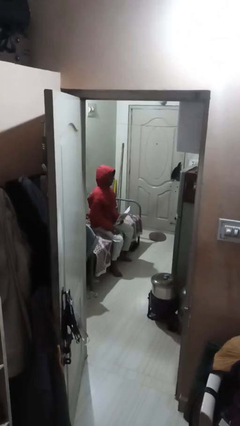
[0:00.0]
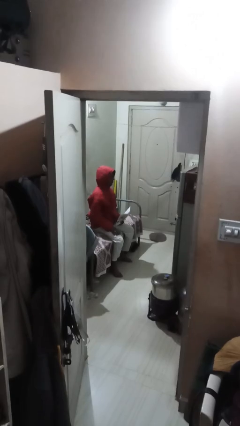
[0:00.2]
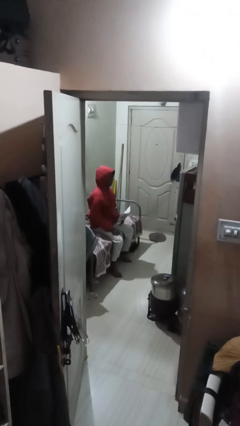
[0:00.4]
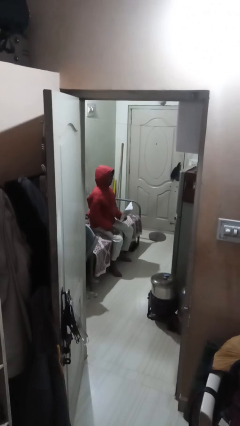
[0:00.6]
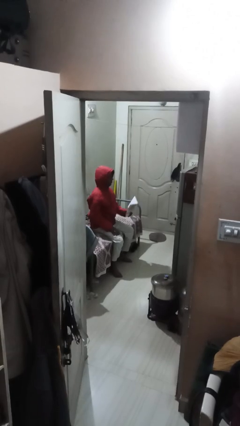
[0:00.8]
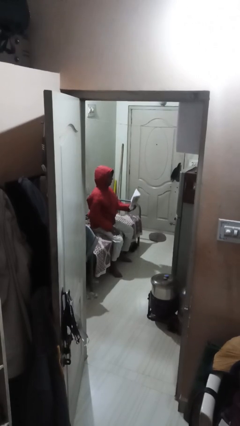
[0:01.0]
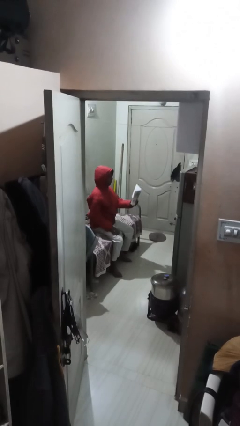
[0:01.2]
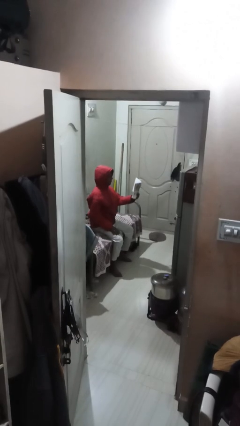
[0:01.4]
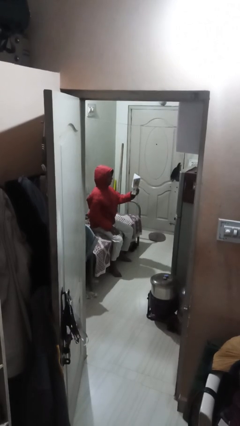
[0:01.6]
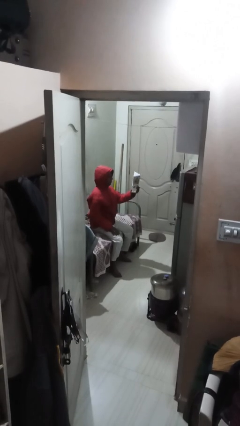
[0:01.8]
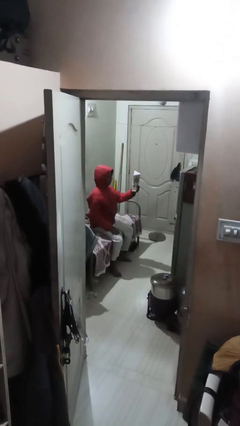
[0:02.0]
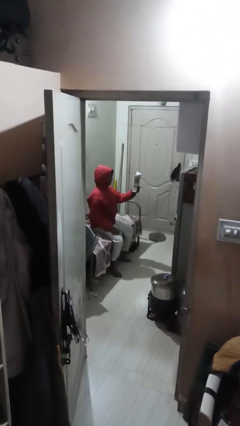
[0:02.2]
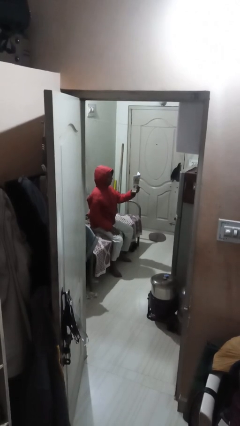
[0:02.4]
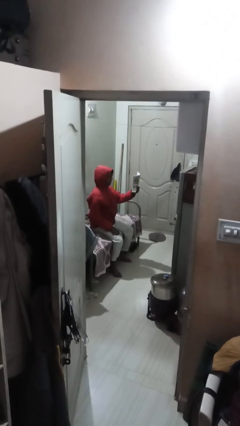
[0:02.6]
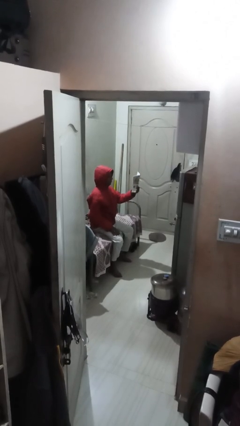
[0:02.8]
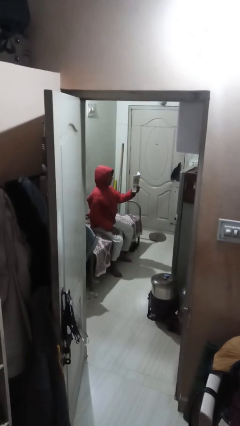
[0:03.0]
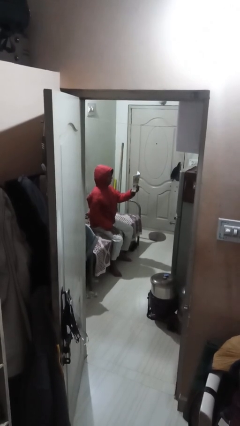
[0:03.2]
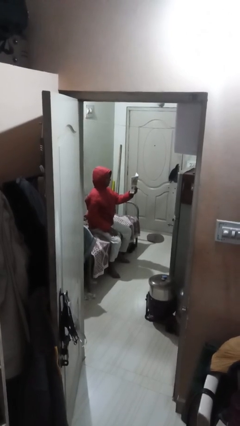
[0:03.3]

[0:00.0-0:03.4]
person reads document

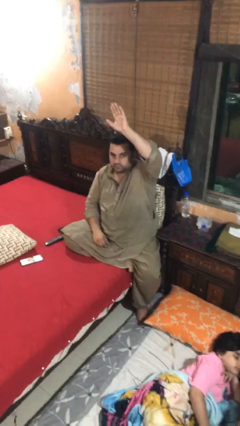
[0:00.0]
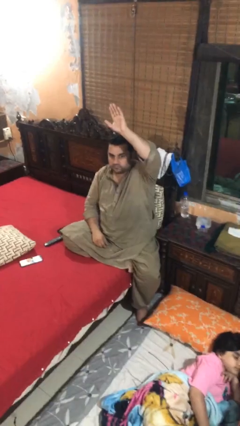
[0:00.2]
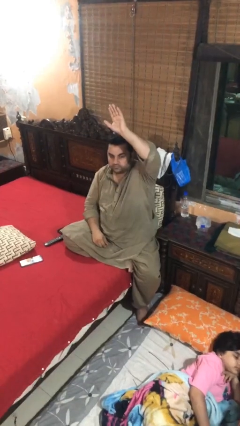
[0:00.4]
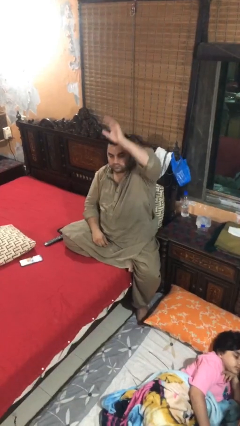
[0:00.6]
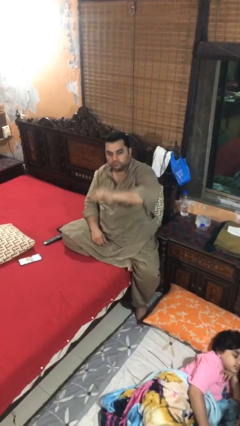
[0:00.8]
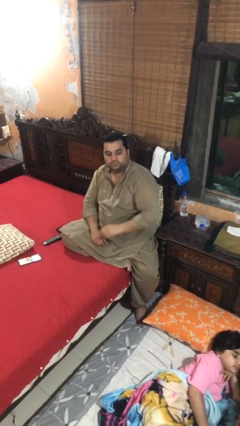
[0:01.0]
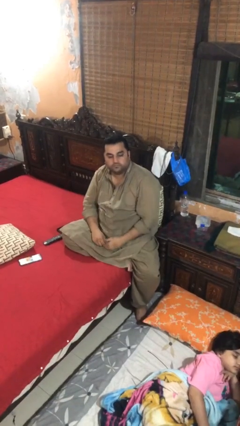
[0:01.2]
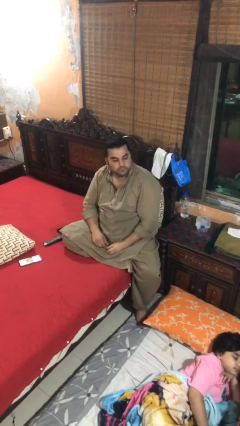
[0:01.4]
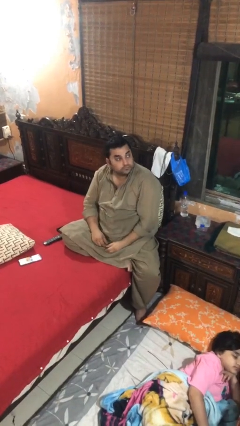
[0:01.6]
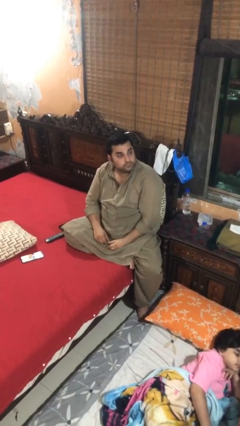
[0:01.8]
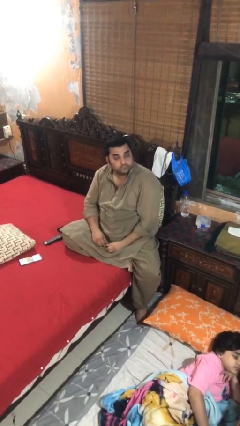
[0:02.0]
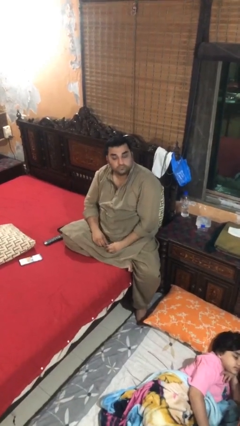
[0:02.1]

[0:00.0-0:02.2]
person gestures lower hand

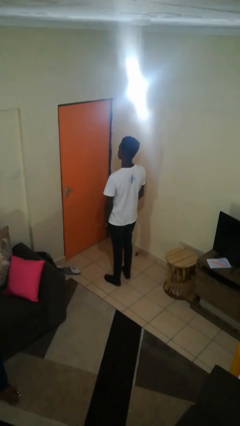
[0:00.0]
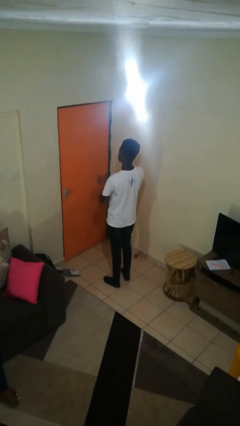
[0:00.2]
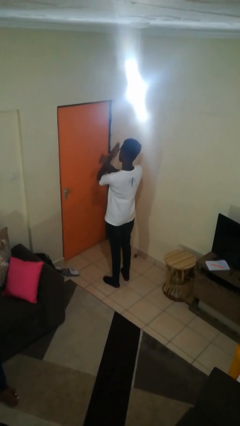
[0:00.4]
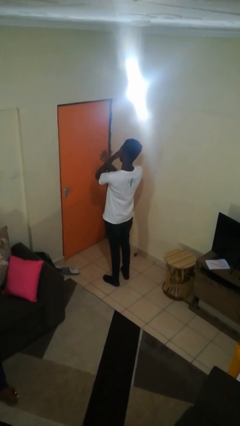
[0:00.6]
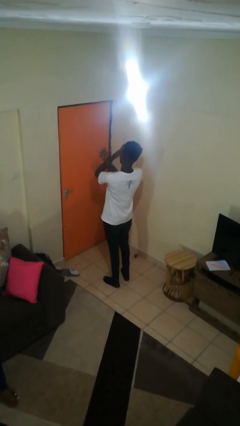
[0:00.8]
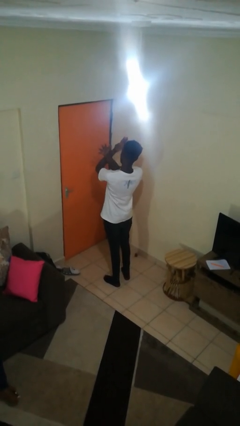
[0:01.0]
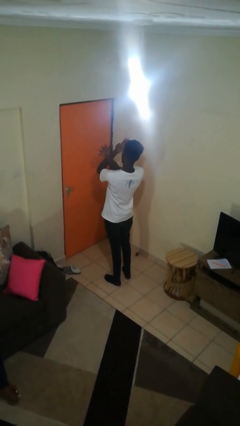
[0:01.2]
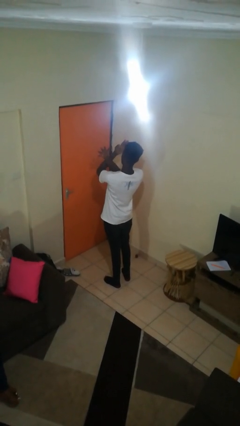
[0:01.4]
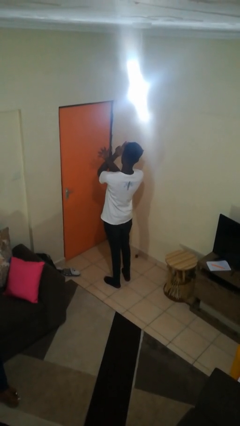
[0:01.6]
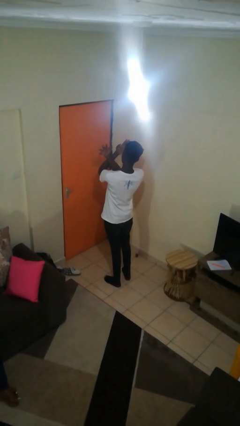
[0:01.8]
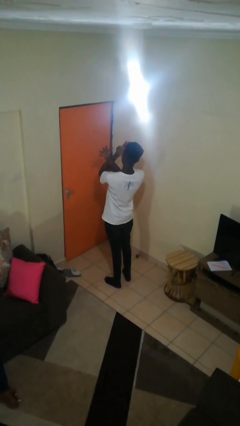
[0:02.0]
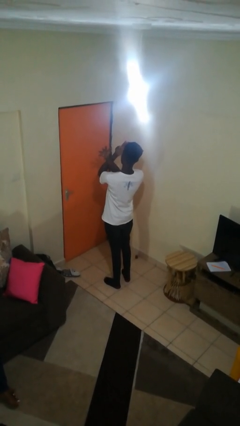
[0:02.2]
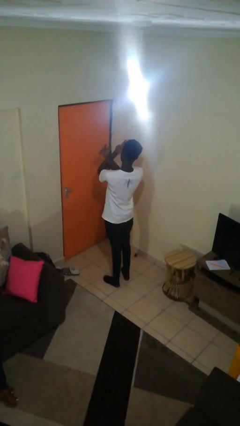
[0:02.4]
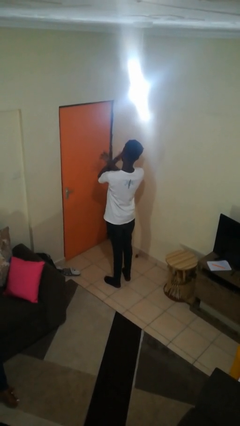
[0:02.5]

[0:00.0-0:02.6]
person gestures arms x

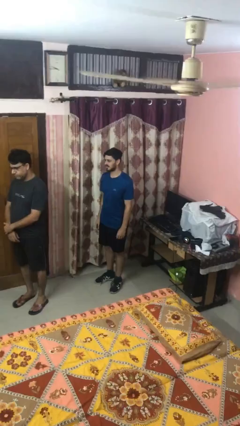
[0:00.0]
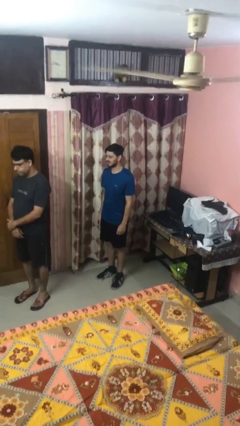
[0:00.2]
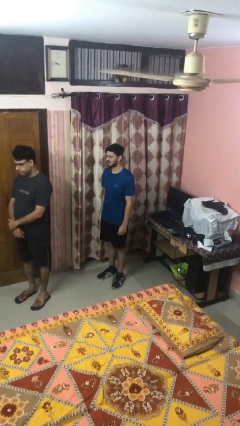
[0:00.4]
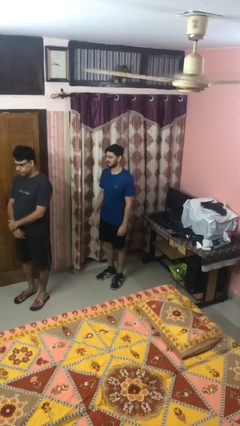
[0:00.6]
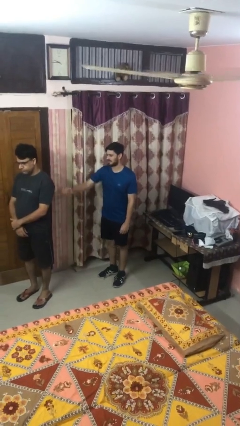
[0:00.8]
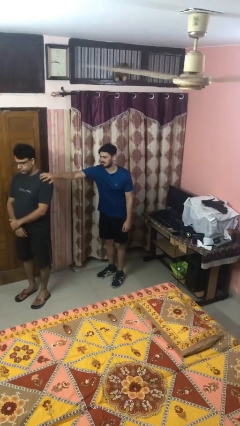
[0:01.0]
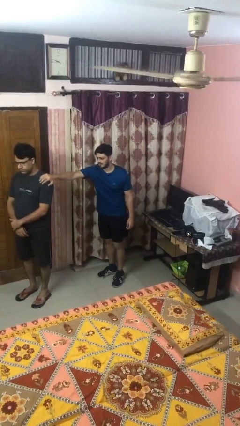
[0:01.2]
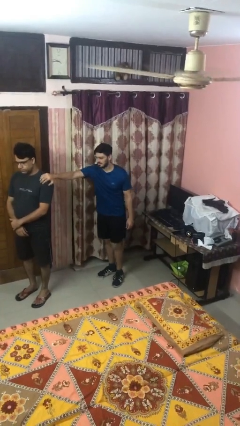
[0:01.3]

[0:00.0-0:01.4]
person grabs person by shoulder

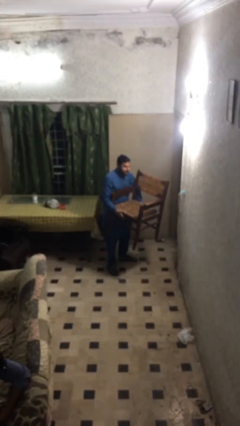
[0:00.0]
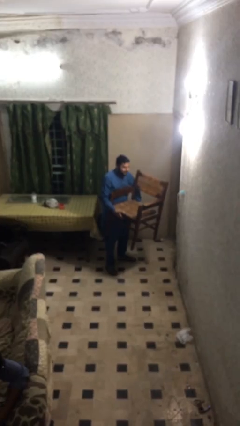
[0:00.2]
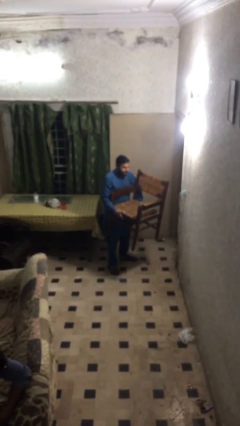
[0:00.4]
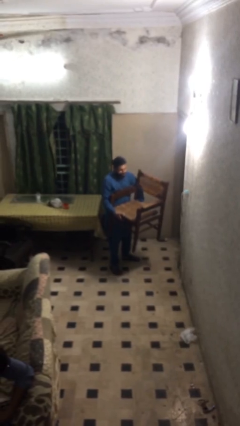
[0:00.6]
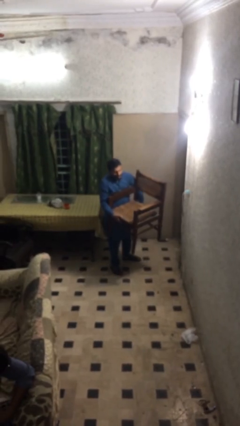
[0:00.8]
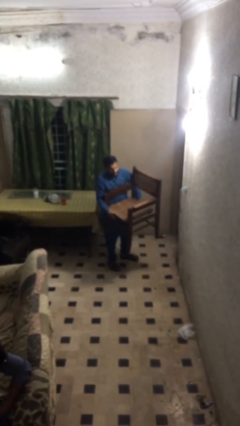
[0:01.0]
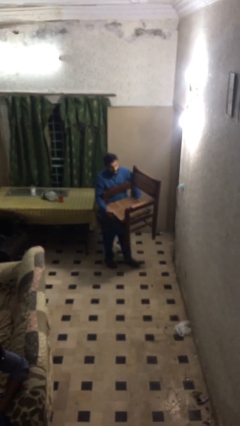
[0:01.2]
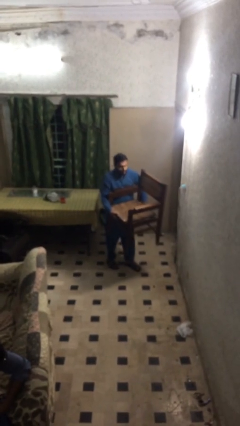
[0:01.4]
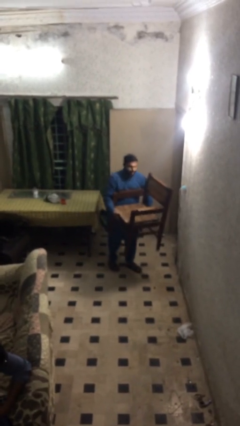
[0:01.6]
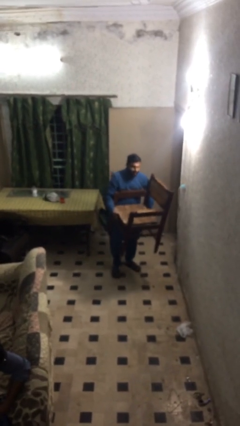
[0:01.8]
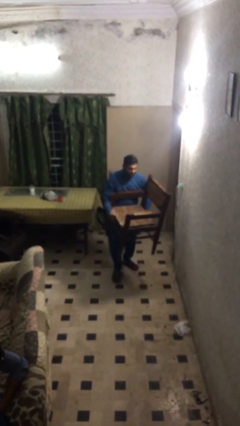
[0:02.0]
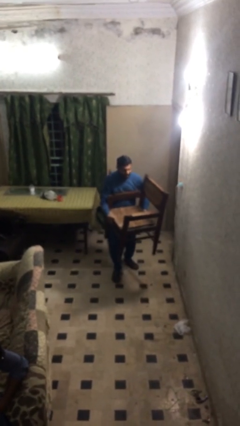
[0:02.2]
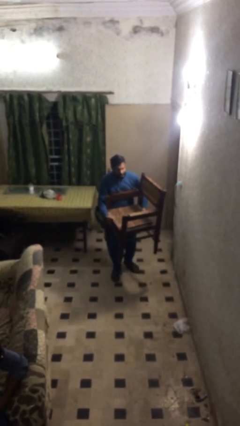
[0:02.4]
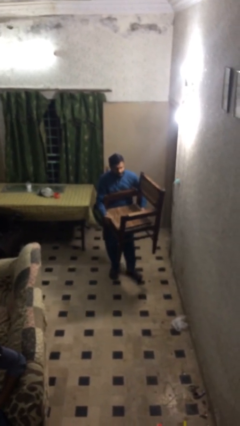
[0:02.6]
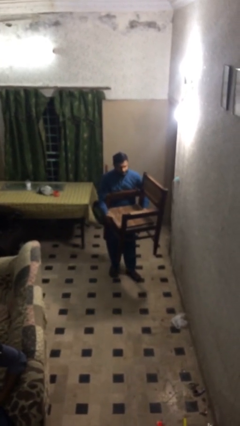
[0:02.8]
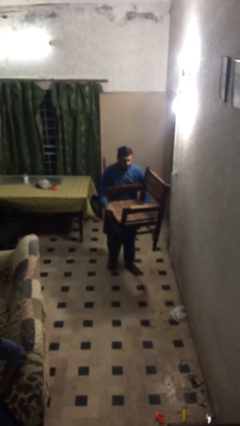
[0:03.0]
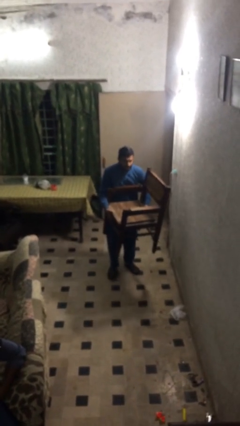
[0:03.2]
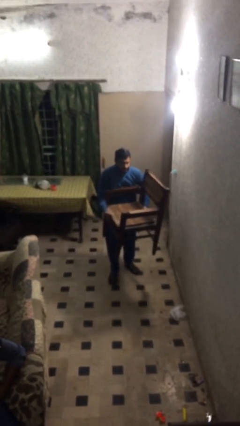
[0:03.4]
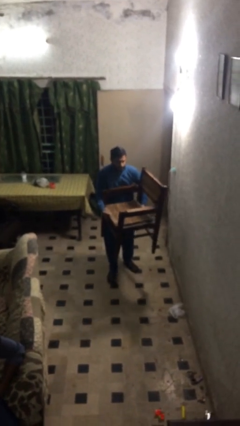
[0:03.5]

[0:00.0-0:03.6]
person carries heavy object

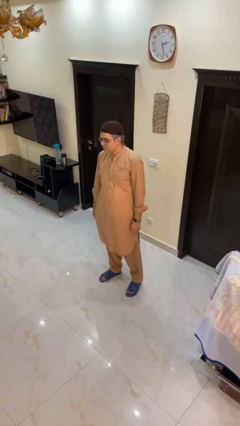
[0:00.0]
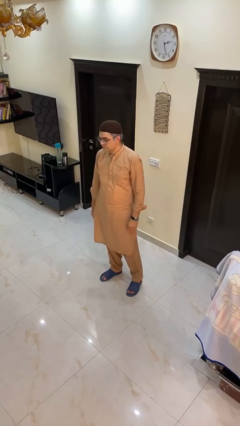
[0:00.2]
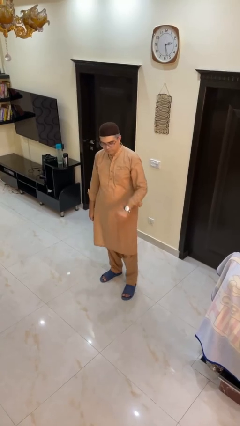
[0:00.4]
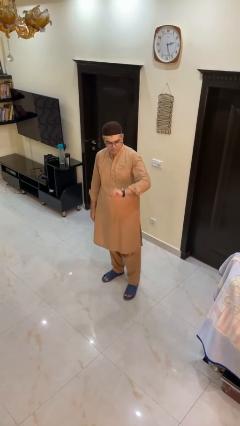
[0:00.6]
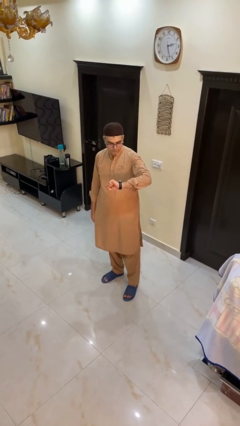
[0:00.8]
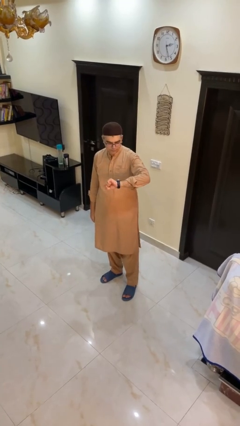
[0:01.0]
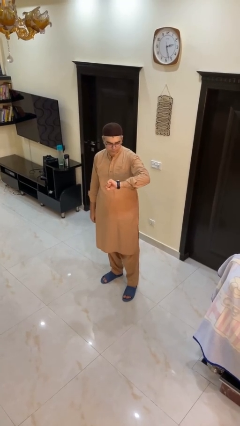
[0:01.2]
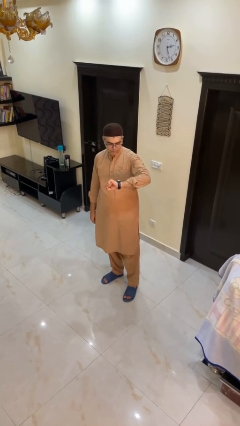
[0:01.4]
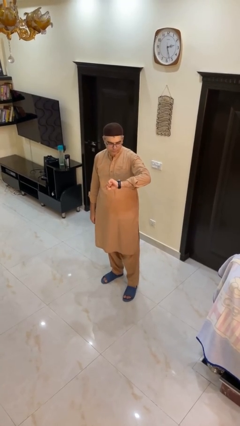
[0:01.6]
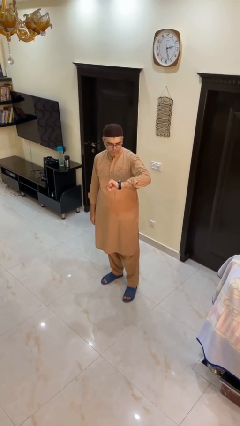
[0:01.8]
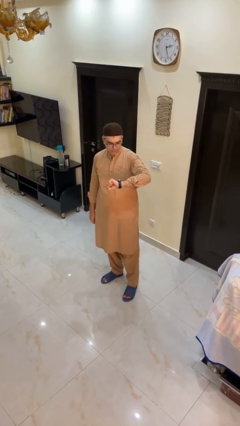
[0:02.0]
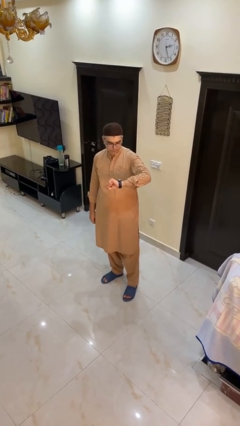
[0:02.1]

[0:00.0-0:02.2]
person looks at wristwatch

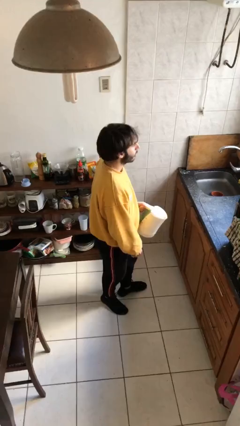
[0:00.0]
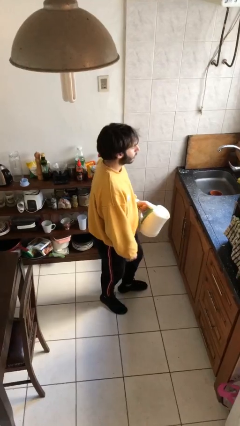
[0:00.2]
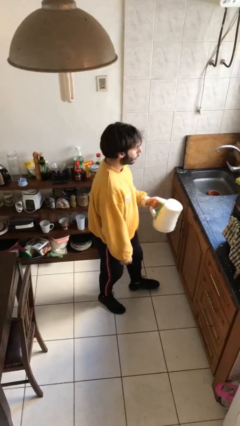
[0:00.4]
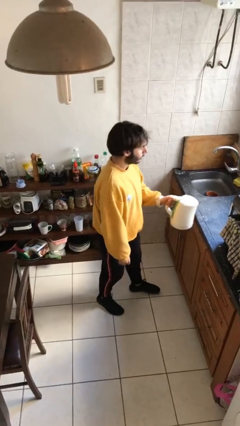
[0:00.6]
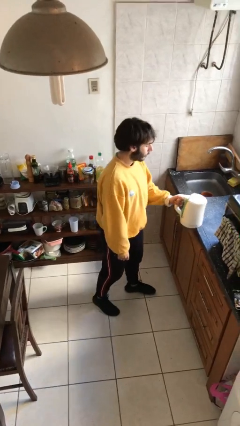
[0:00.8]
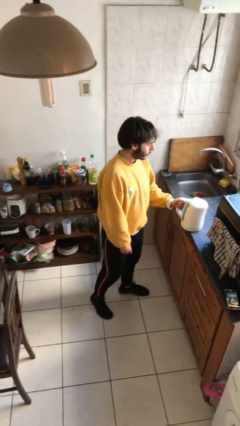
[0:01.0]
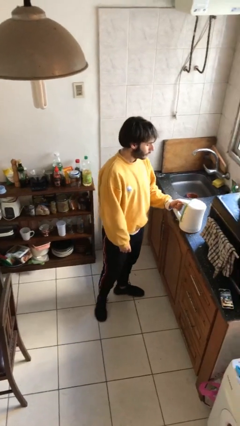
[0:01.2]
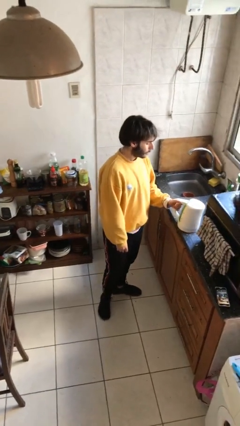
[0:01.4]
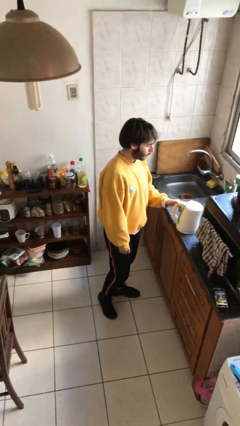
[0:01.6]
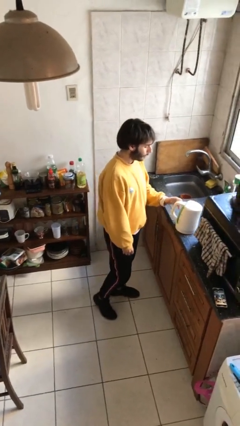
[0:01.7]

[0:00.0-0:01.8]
person puts down object on countertop
